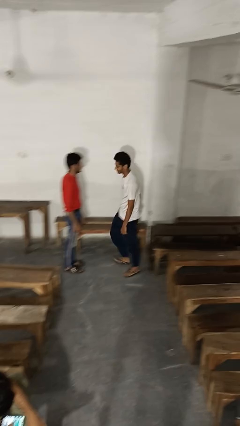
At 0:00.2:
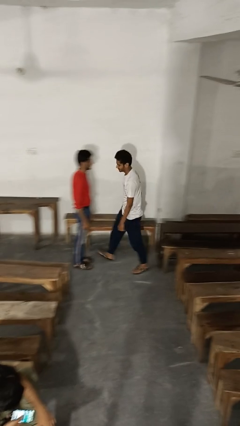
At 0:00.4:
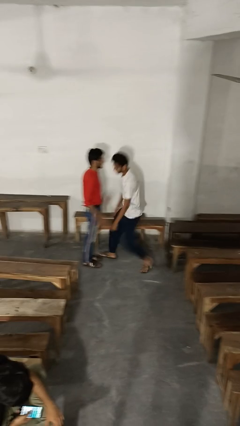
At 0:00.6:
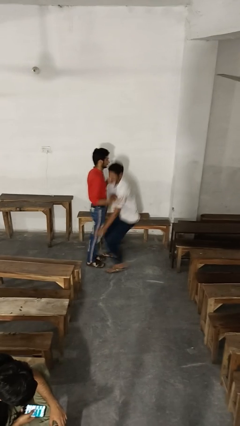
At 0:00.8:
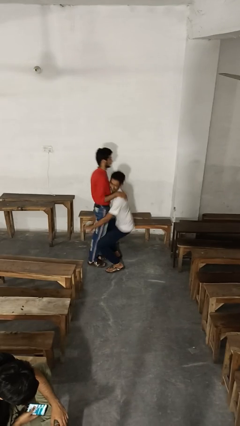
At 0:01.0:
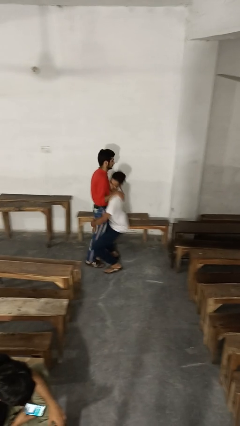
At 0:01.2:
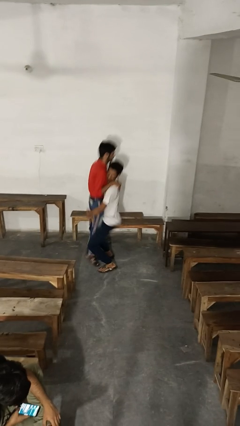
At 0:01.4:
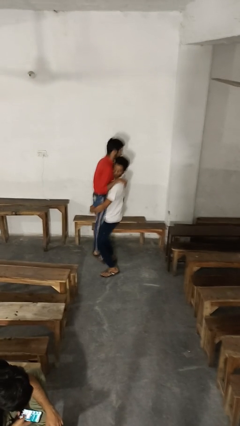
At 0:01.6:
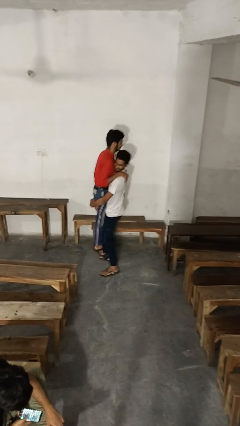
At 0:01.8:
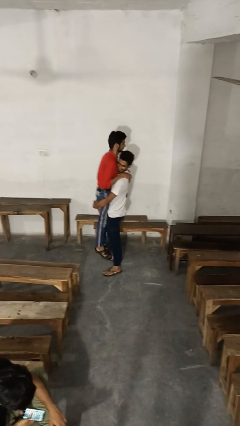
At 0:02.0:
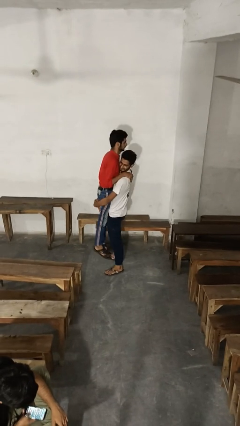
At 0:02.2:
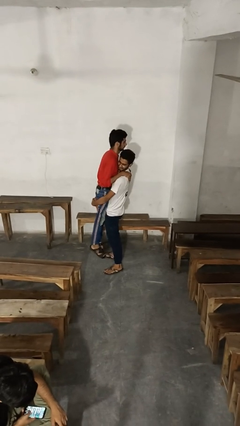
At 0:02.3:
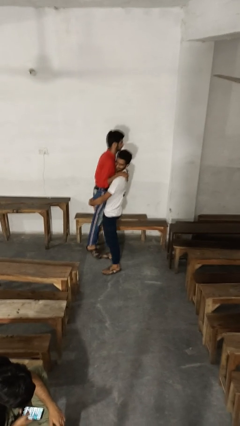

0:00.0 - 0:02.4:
person picks up person

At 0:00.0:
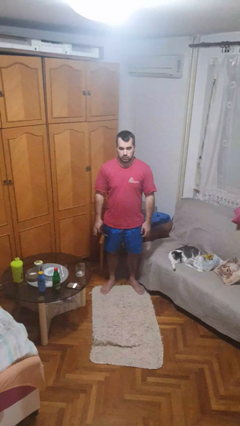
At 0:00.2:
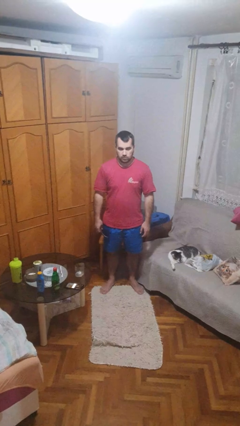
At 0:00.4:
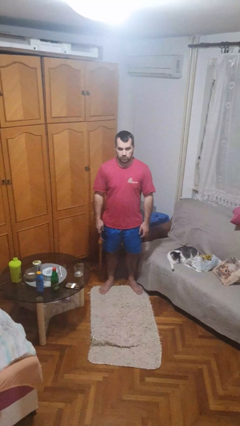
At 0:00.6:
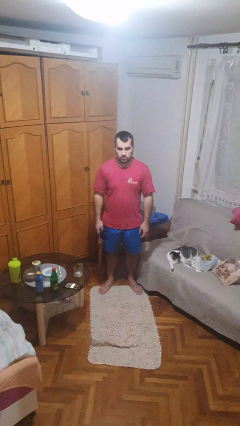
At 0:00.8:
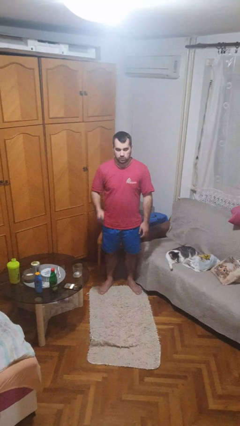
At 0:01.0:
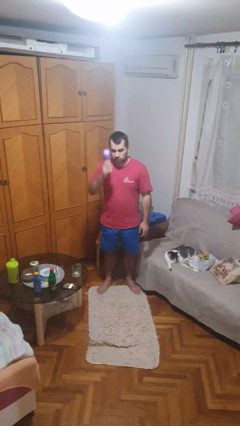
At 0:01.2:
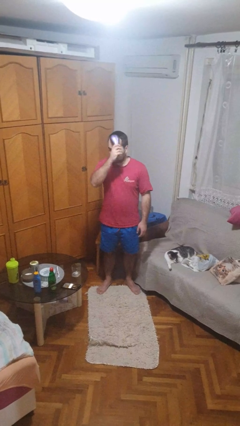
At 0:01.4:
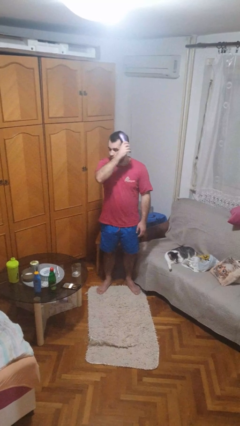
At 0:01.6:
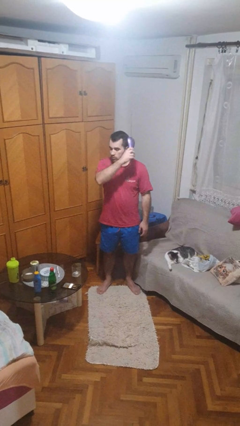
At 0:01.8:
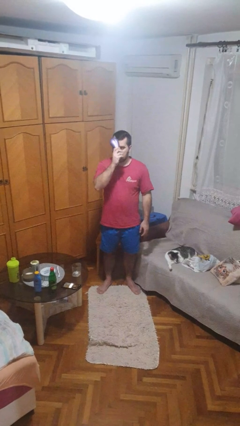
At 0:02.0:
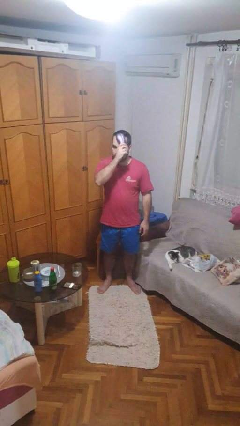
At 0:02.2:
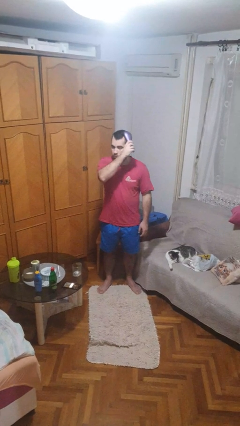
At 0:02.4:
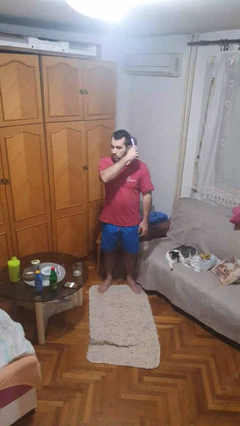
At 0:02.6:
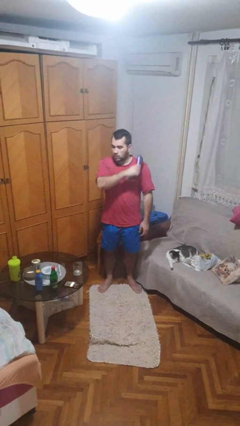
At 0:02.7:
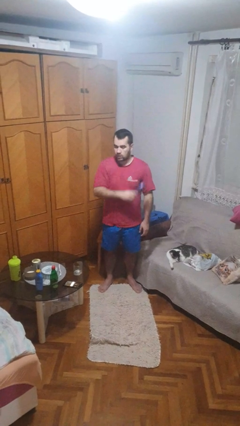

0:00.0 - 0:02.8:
person brushes hair

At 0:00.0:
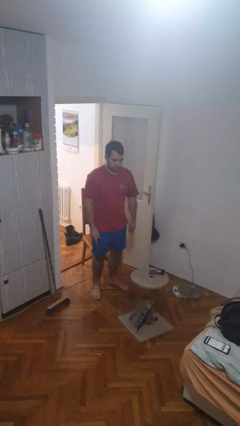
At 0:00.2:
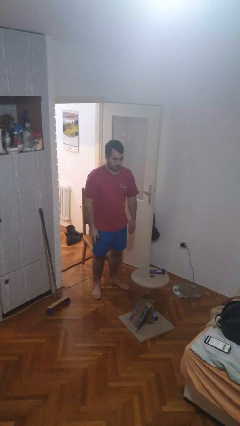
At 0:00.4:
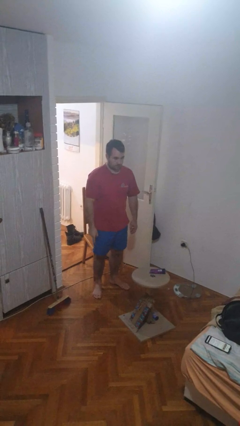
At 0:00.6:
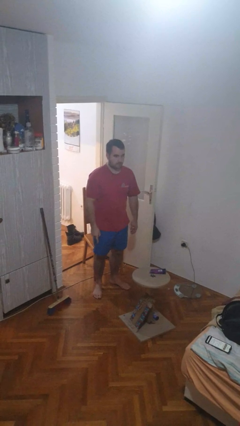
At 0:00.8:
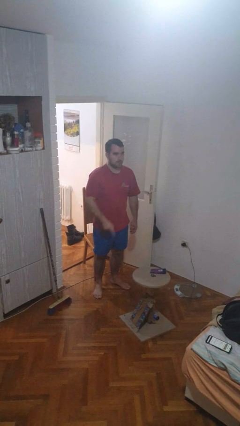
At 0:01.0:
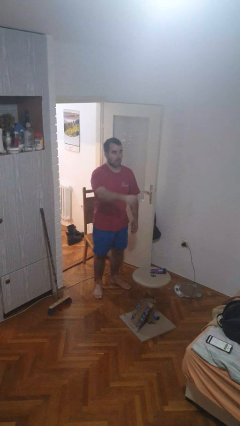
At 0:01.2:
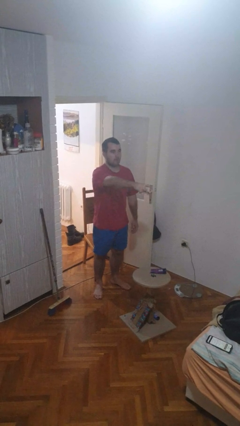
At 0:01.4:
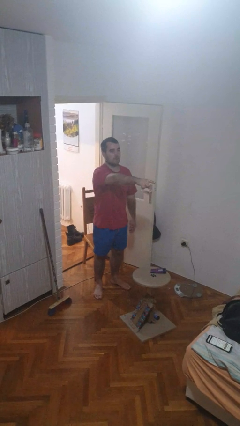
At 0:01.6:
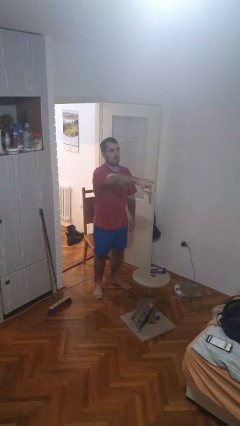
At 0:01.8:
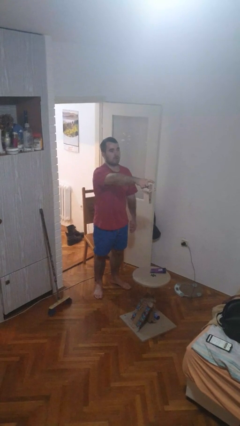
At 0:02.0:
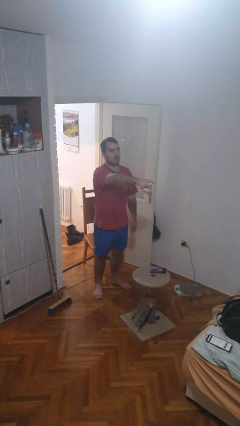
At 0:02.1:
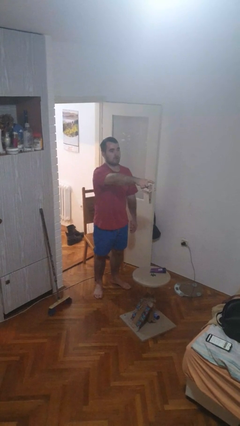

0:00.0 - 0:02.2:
person points at person

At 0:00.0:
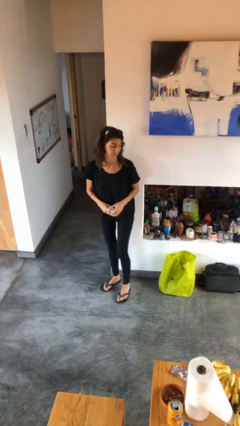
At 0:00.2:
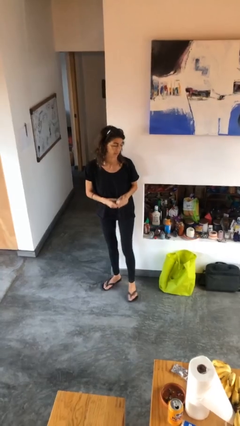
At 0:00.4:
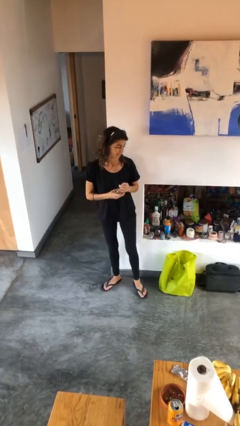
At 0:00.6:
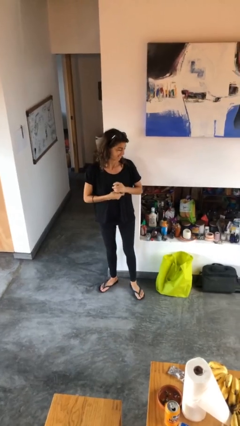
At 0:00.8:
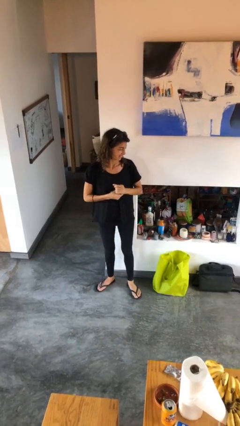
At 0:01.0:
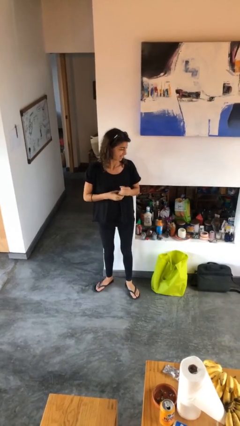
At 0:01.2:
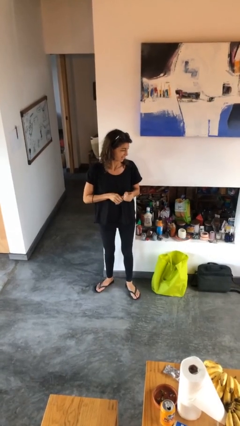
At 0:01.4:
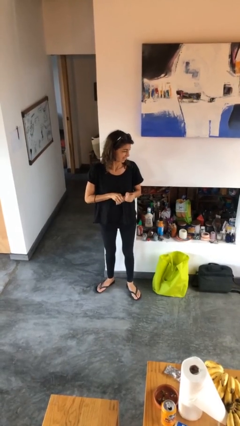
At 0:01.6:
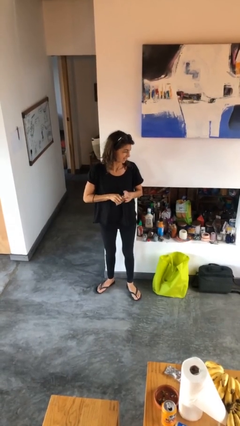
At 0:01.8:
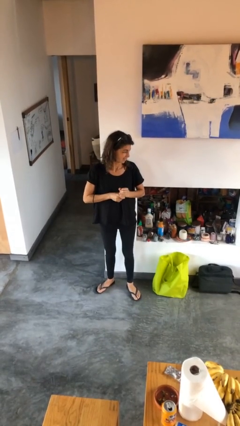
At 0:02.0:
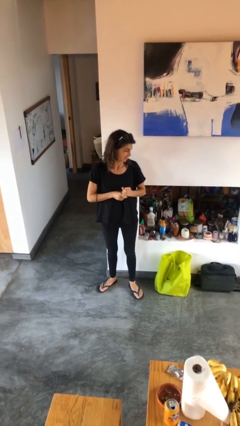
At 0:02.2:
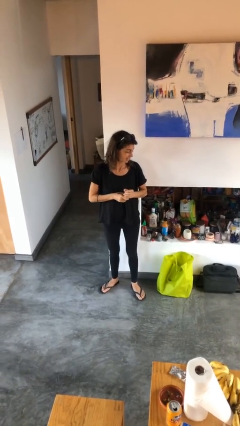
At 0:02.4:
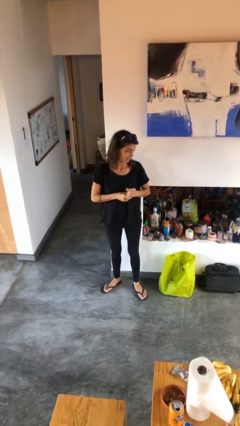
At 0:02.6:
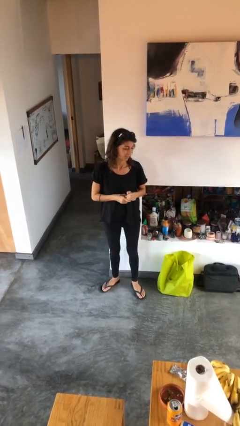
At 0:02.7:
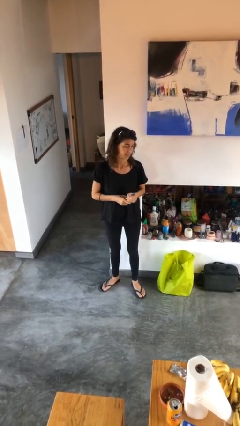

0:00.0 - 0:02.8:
person squeezes object

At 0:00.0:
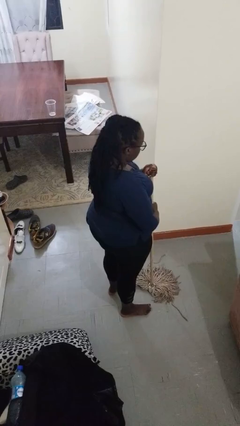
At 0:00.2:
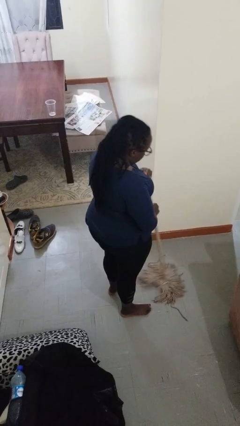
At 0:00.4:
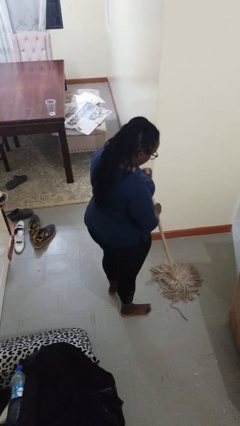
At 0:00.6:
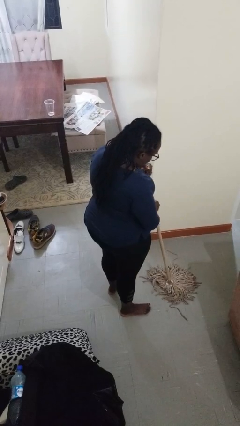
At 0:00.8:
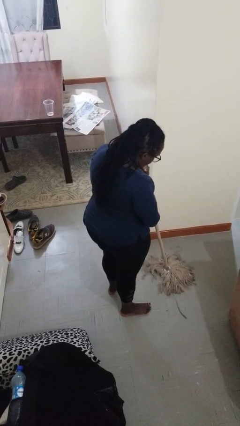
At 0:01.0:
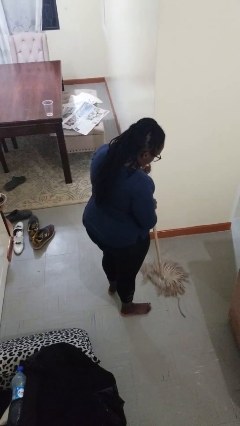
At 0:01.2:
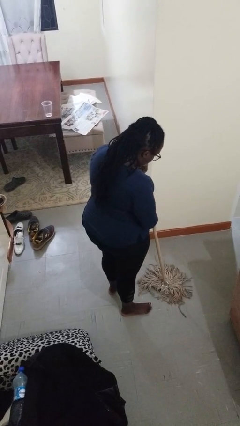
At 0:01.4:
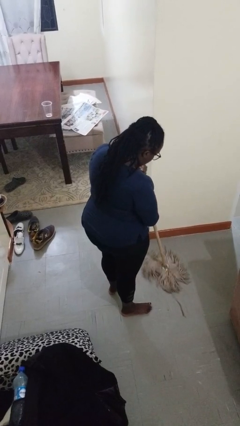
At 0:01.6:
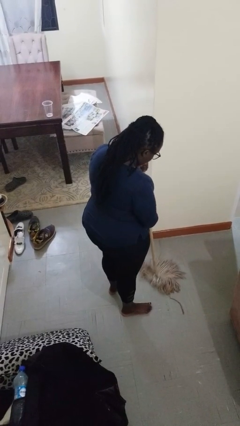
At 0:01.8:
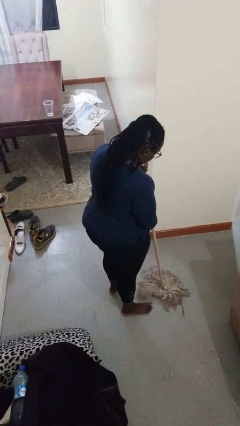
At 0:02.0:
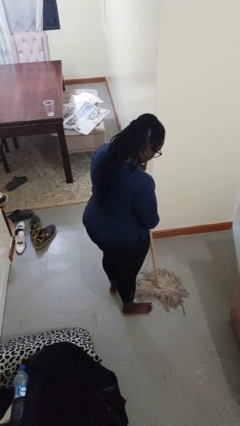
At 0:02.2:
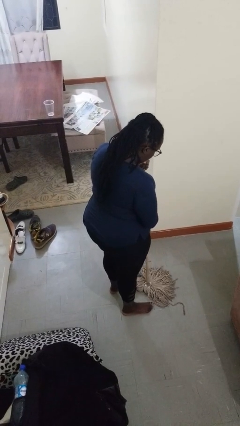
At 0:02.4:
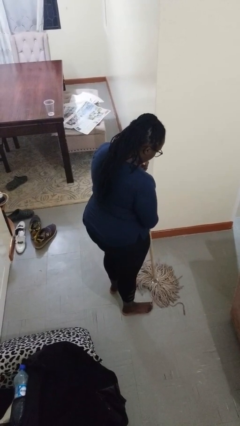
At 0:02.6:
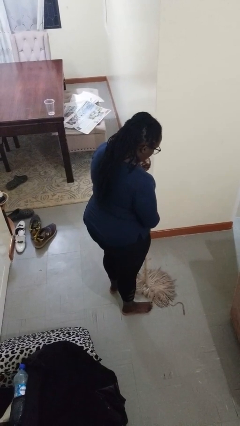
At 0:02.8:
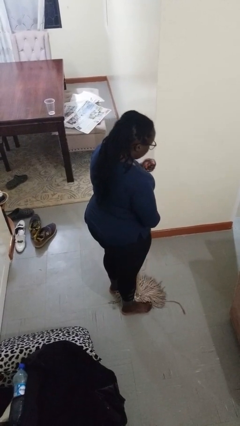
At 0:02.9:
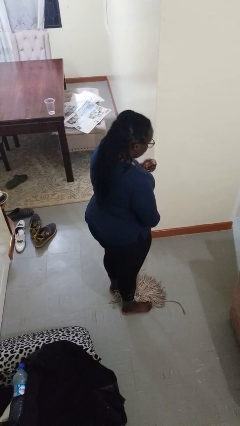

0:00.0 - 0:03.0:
person mops

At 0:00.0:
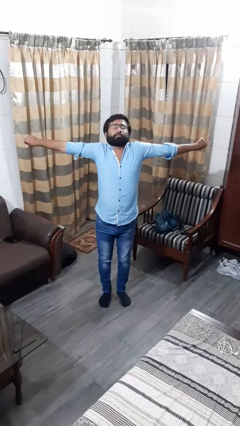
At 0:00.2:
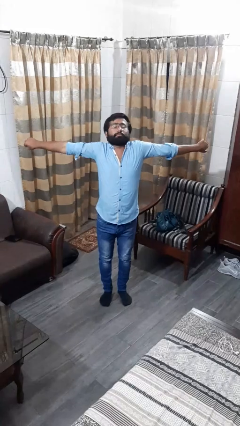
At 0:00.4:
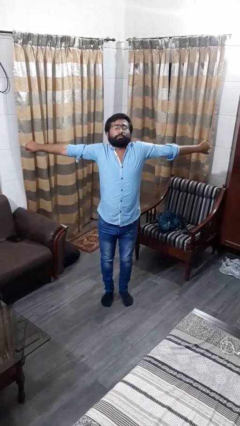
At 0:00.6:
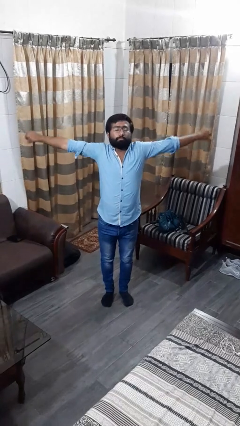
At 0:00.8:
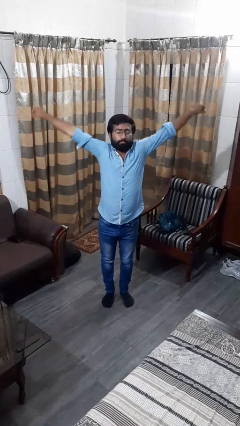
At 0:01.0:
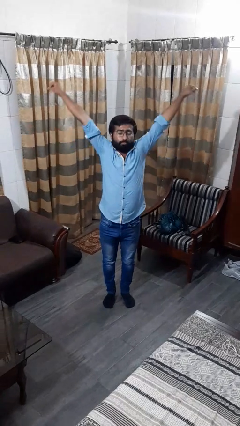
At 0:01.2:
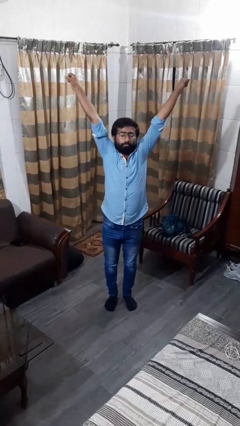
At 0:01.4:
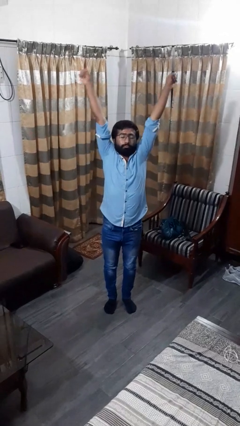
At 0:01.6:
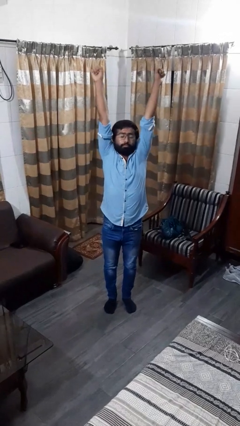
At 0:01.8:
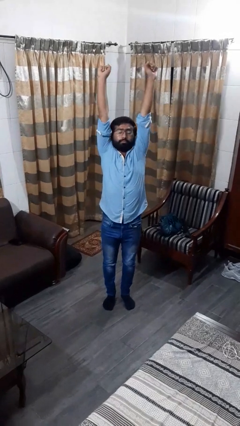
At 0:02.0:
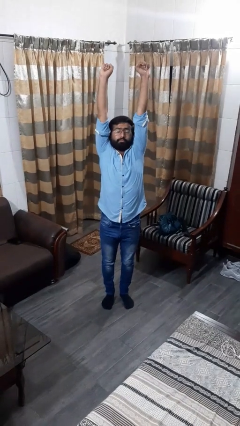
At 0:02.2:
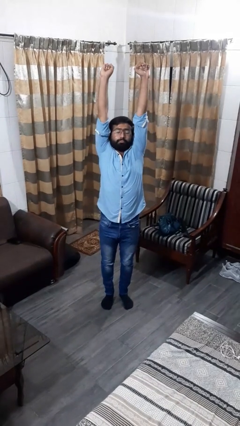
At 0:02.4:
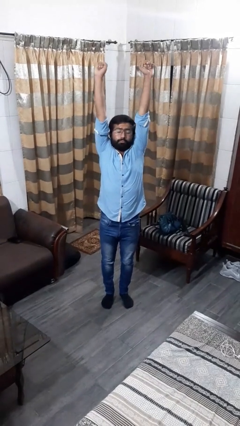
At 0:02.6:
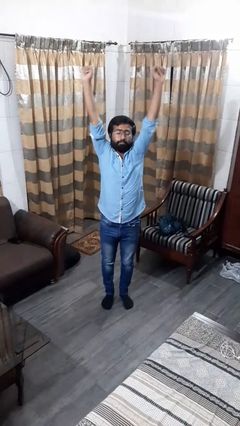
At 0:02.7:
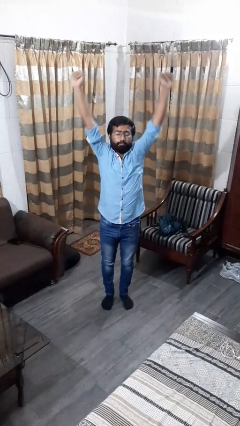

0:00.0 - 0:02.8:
person stretches arms over head

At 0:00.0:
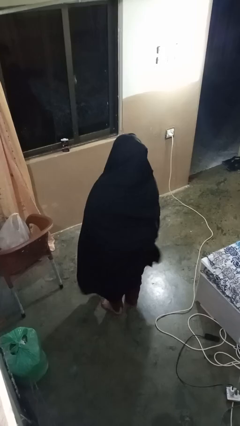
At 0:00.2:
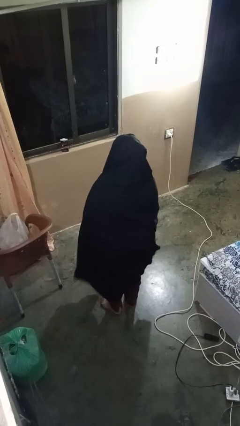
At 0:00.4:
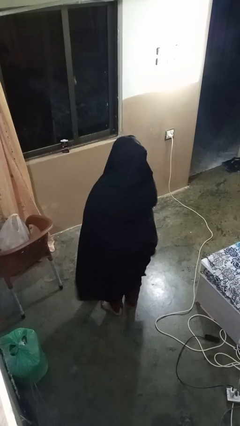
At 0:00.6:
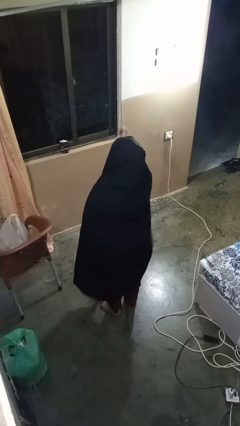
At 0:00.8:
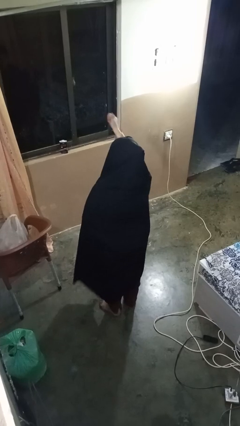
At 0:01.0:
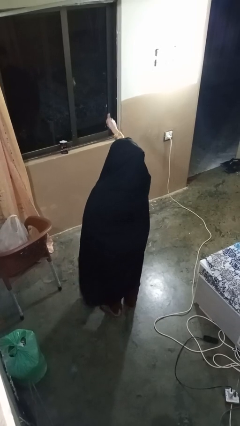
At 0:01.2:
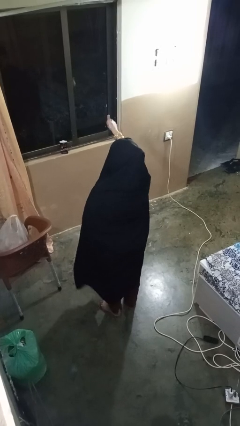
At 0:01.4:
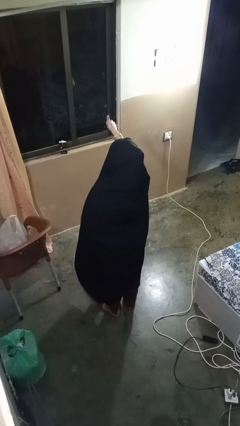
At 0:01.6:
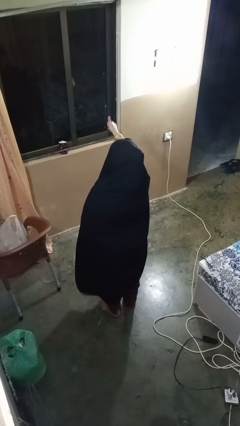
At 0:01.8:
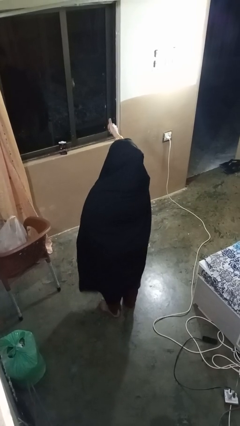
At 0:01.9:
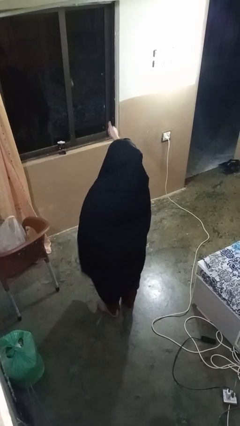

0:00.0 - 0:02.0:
person gestures thumbs up
